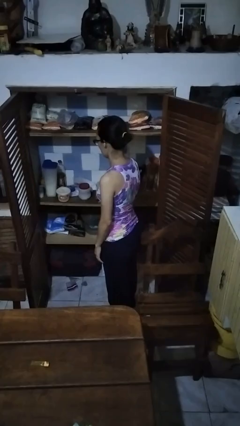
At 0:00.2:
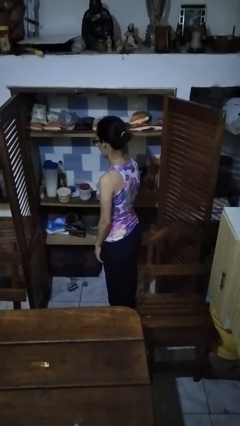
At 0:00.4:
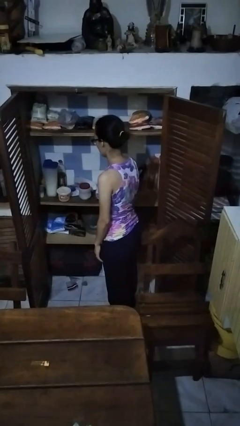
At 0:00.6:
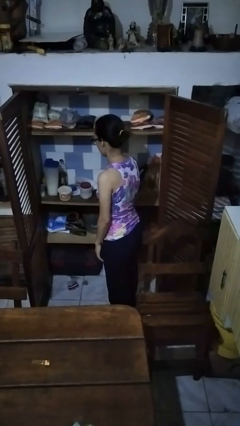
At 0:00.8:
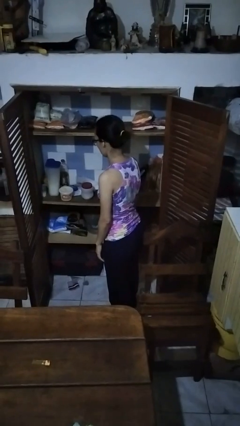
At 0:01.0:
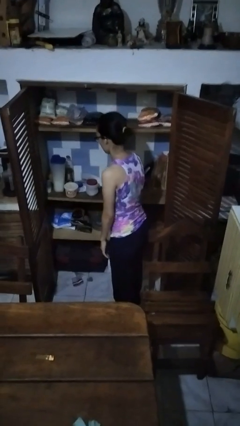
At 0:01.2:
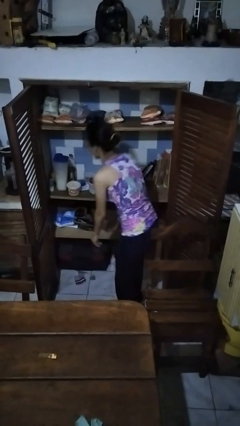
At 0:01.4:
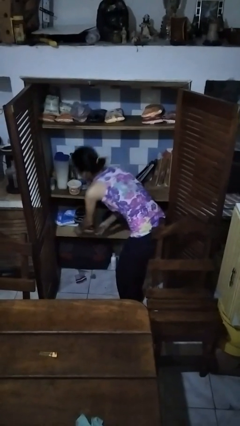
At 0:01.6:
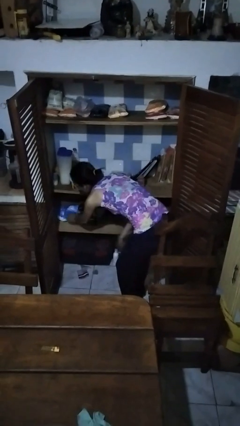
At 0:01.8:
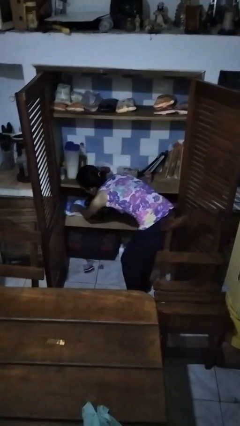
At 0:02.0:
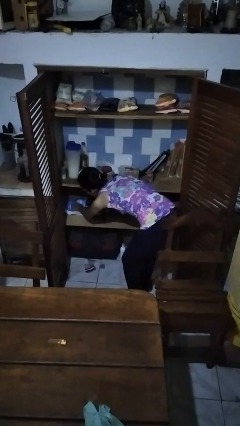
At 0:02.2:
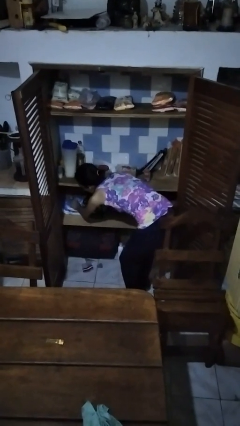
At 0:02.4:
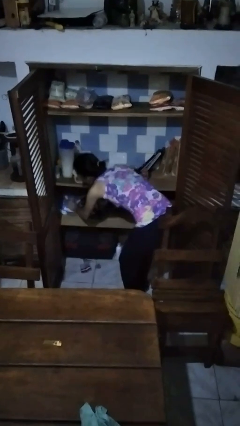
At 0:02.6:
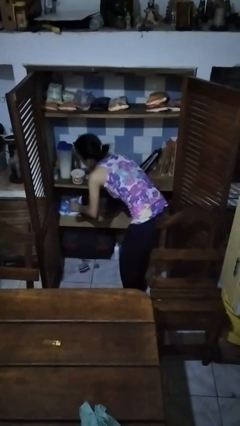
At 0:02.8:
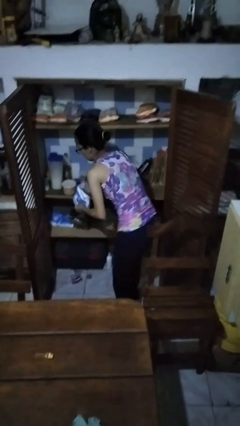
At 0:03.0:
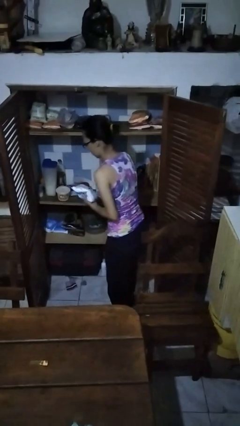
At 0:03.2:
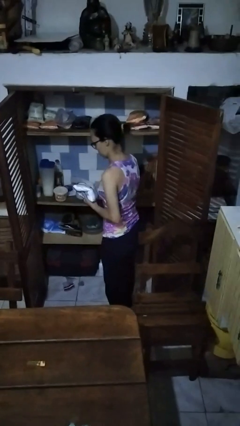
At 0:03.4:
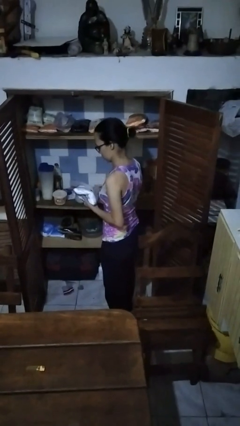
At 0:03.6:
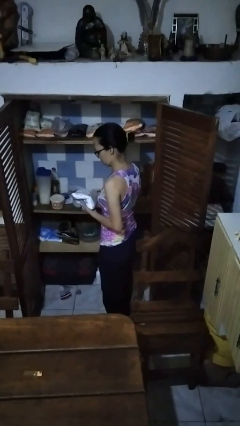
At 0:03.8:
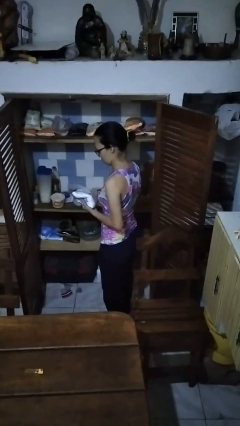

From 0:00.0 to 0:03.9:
person takes object from cabinet

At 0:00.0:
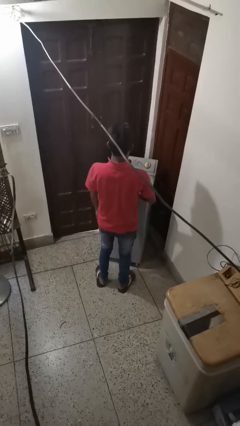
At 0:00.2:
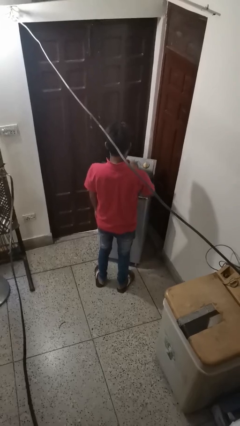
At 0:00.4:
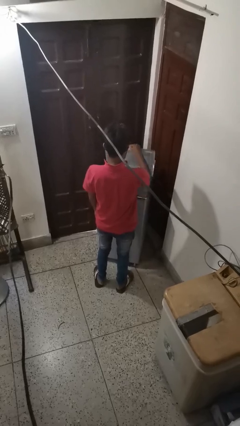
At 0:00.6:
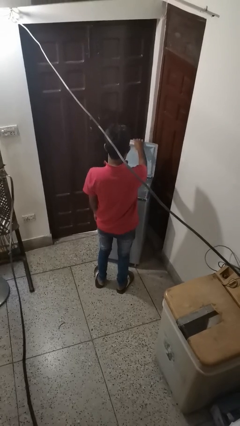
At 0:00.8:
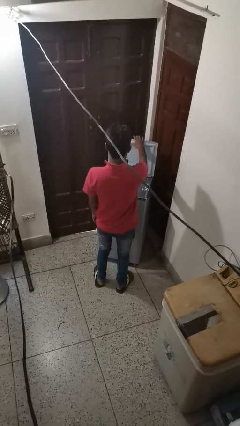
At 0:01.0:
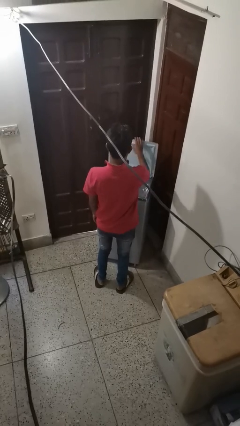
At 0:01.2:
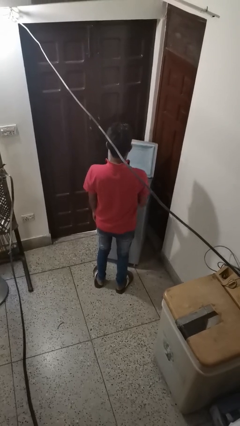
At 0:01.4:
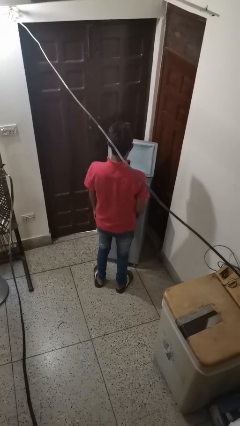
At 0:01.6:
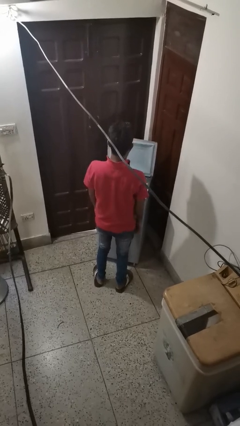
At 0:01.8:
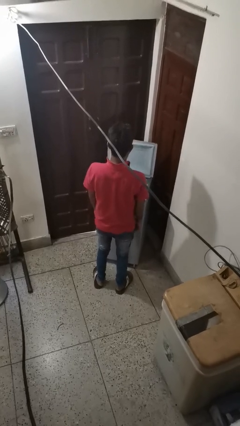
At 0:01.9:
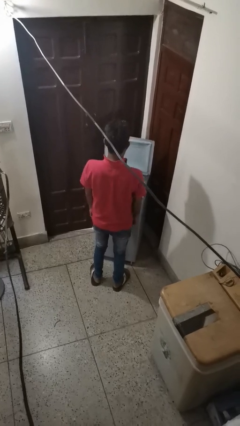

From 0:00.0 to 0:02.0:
person opens clothes washer

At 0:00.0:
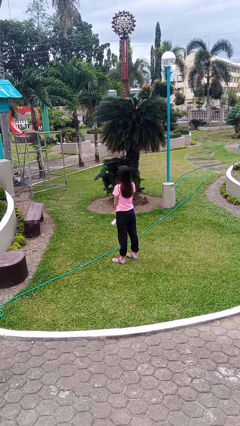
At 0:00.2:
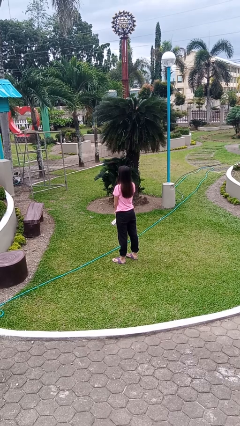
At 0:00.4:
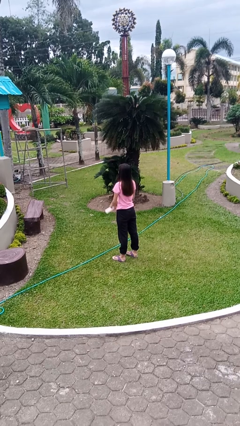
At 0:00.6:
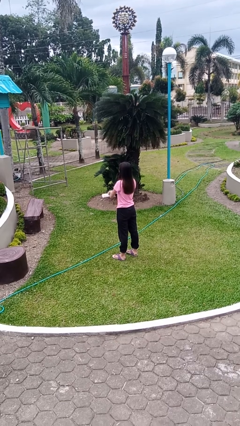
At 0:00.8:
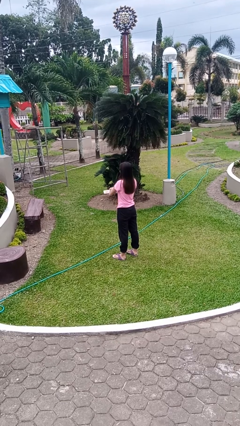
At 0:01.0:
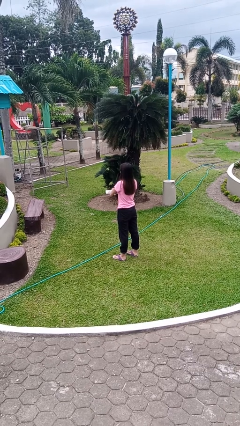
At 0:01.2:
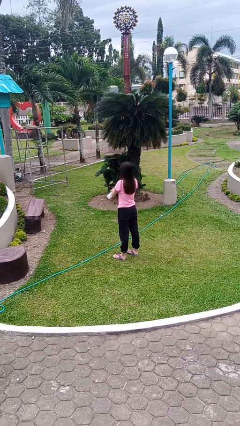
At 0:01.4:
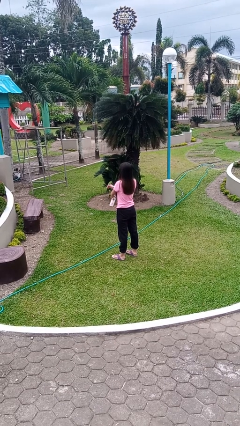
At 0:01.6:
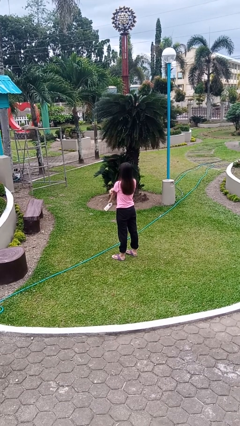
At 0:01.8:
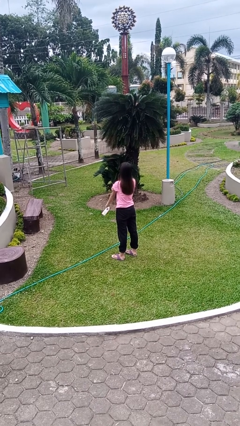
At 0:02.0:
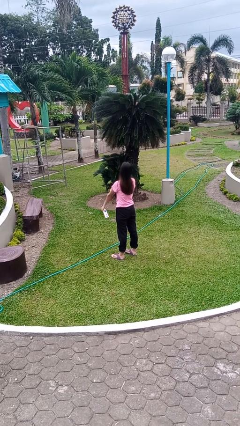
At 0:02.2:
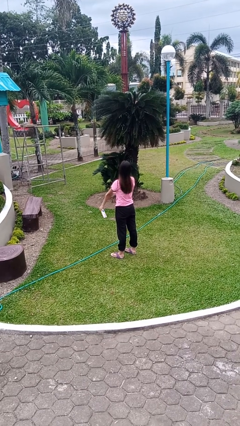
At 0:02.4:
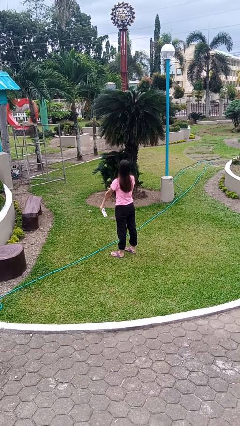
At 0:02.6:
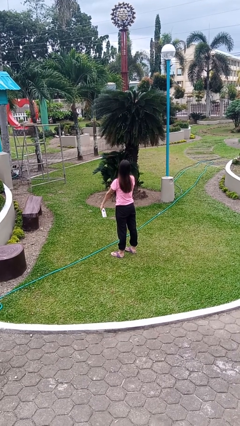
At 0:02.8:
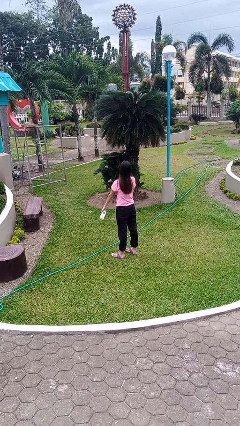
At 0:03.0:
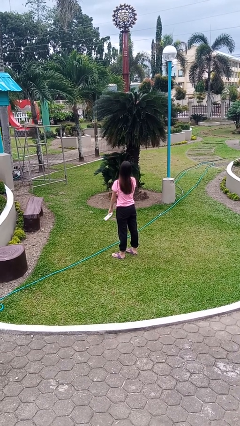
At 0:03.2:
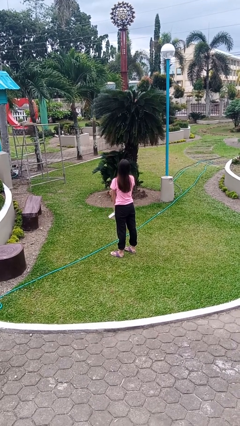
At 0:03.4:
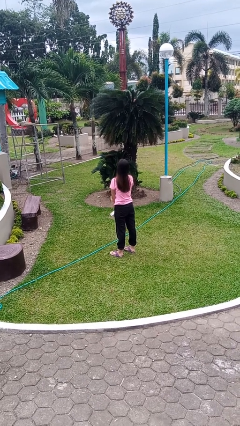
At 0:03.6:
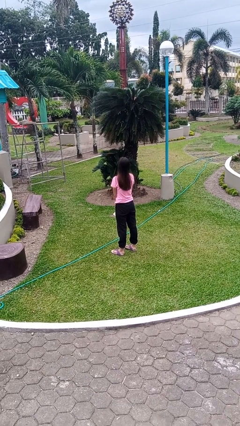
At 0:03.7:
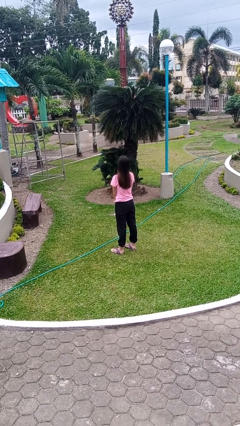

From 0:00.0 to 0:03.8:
person applies sunscreen

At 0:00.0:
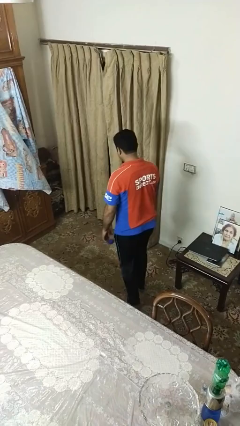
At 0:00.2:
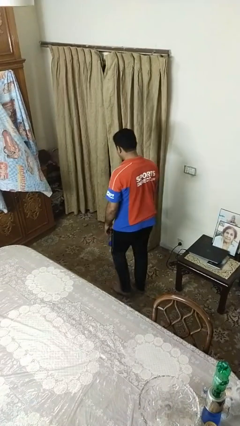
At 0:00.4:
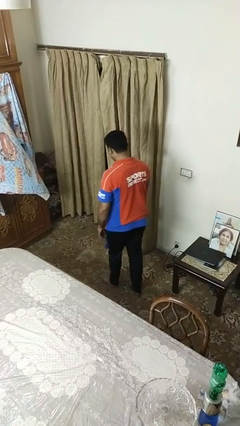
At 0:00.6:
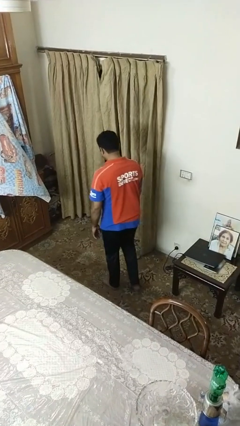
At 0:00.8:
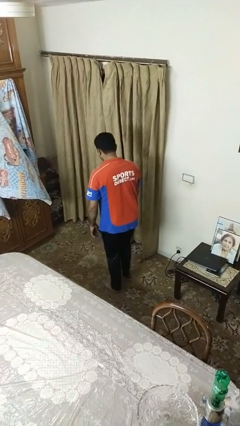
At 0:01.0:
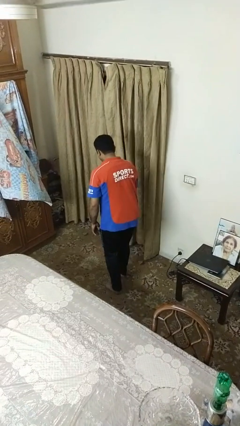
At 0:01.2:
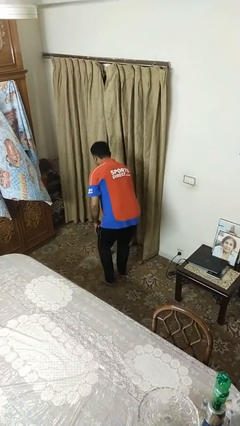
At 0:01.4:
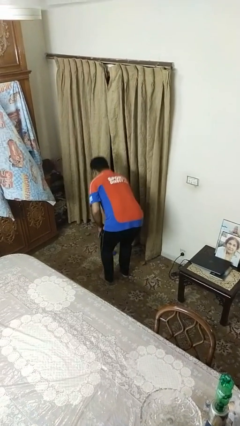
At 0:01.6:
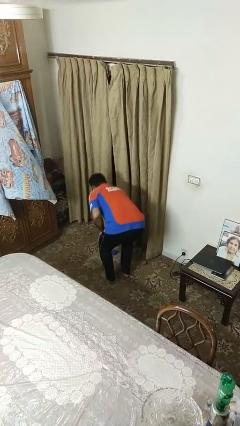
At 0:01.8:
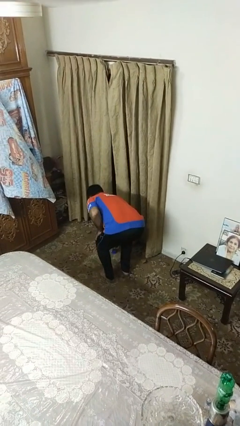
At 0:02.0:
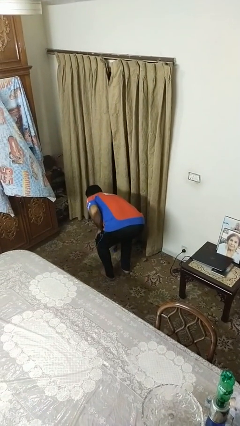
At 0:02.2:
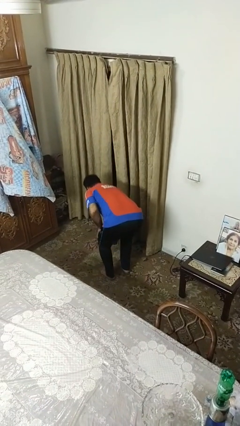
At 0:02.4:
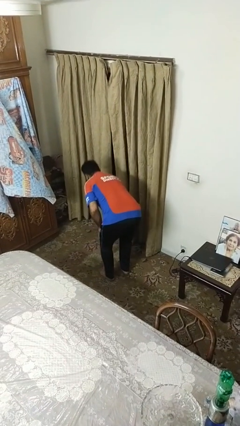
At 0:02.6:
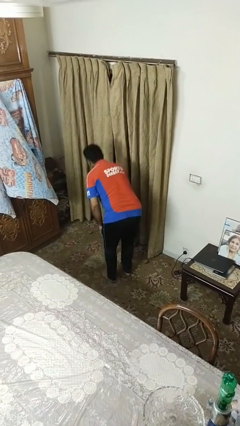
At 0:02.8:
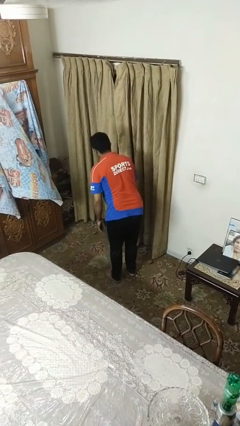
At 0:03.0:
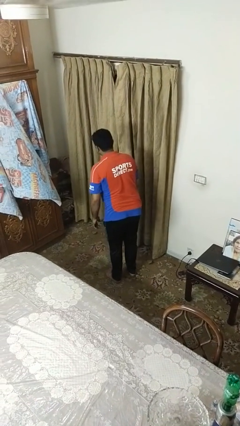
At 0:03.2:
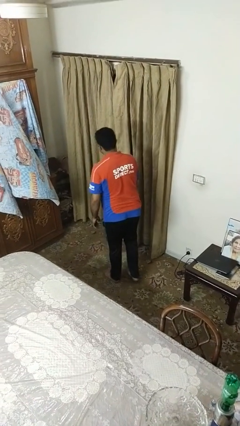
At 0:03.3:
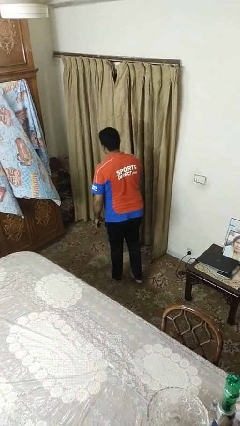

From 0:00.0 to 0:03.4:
person picks up object from floor

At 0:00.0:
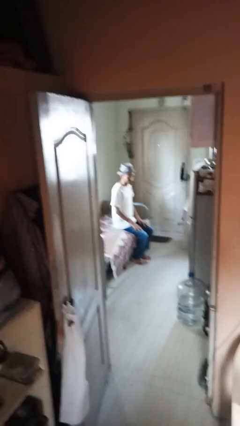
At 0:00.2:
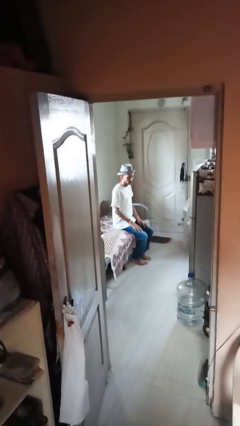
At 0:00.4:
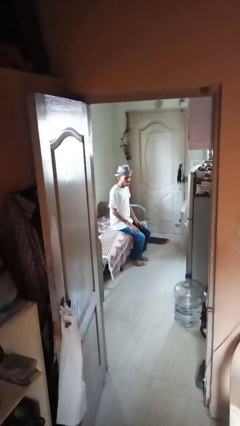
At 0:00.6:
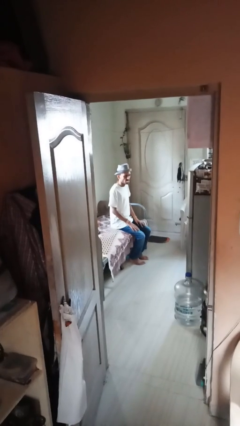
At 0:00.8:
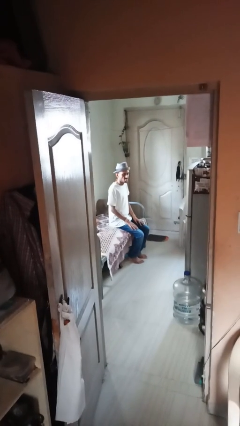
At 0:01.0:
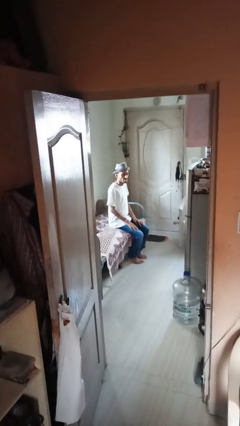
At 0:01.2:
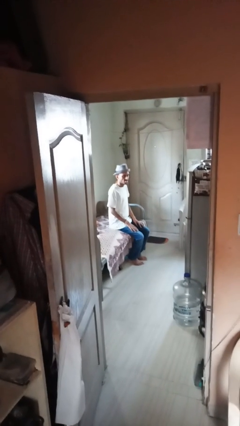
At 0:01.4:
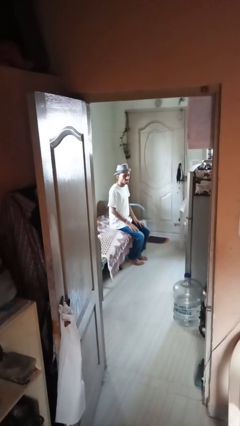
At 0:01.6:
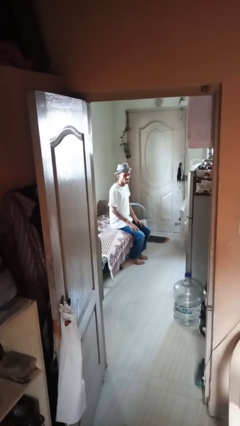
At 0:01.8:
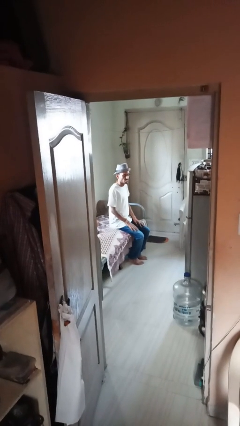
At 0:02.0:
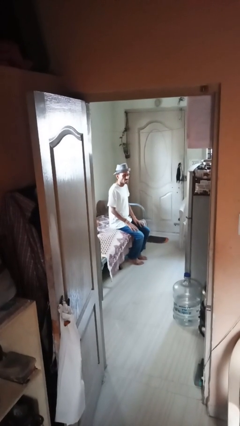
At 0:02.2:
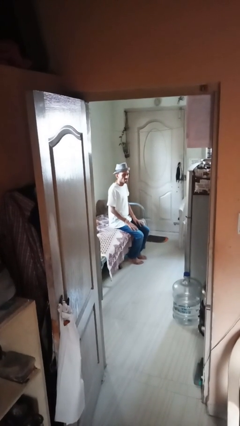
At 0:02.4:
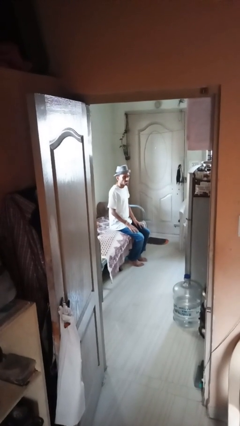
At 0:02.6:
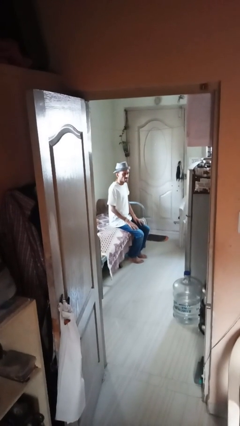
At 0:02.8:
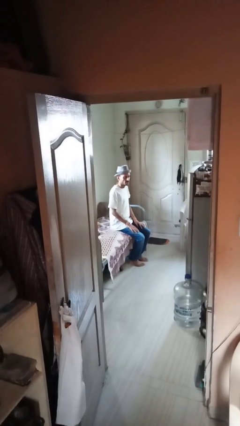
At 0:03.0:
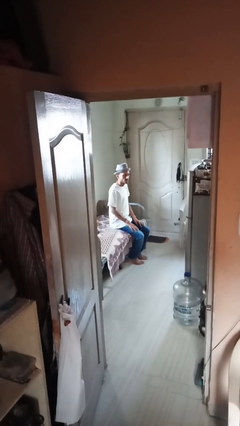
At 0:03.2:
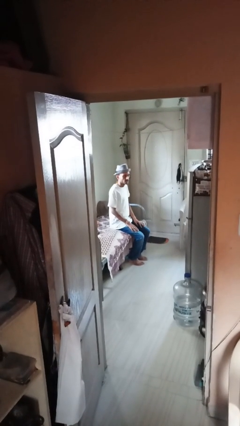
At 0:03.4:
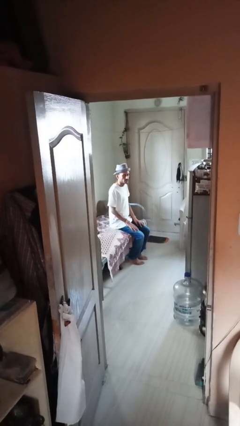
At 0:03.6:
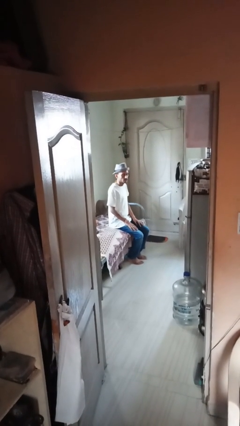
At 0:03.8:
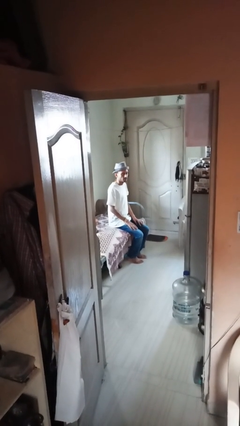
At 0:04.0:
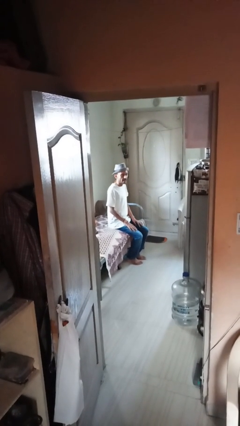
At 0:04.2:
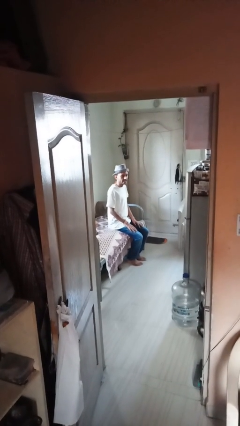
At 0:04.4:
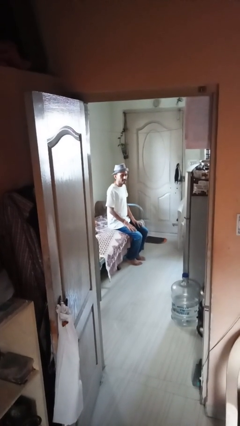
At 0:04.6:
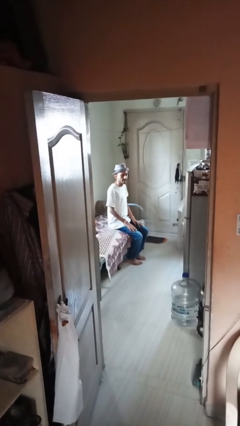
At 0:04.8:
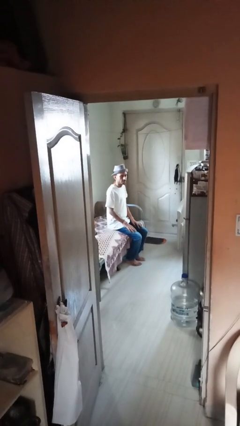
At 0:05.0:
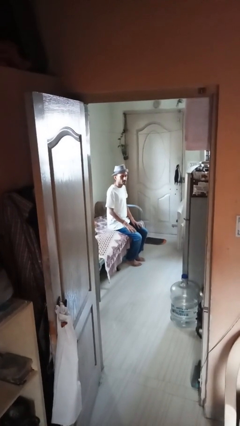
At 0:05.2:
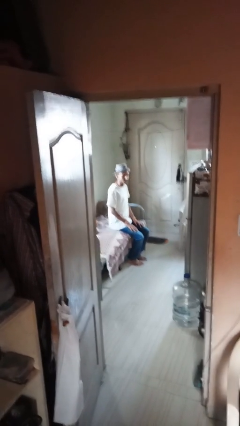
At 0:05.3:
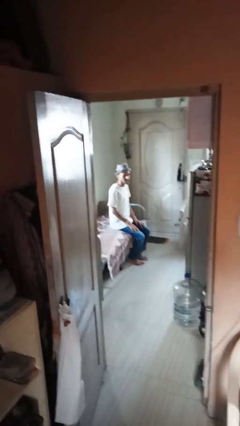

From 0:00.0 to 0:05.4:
person sticks out tongue
